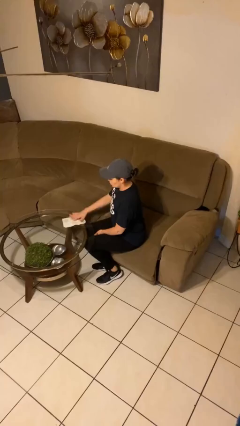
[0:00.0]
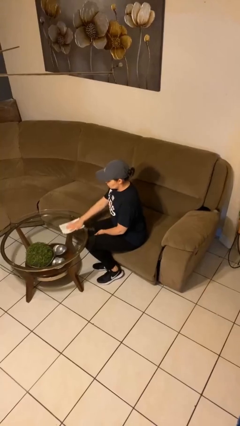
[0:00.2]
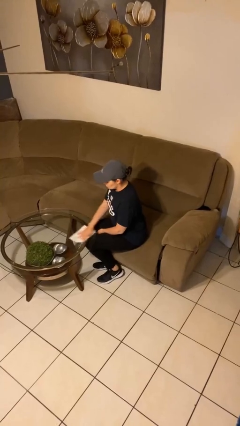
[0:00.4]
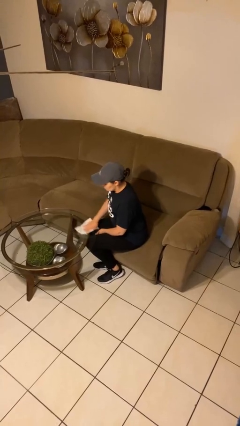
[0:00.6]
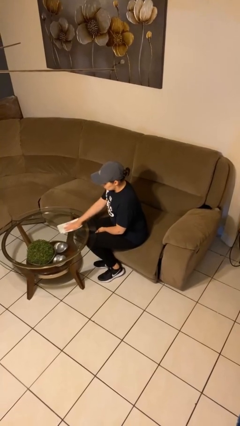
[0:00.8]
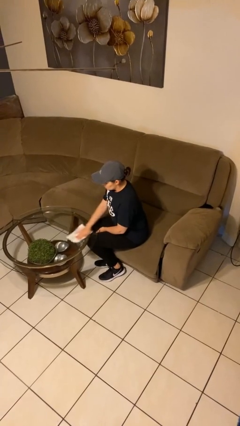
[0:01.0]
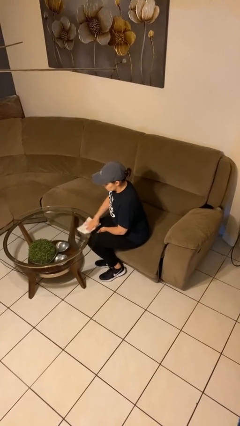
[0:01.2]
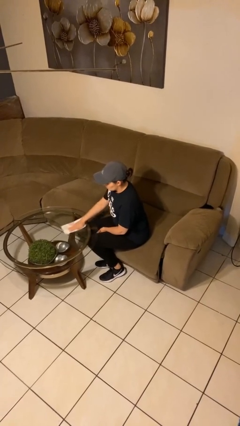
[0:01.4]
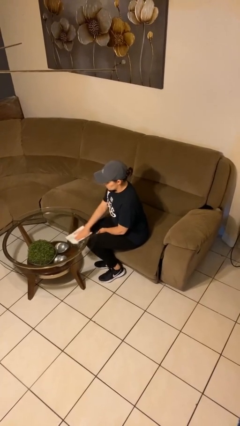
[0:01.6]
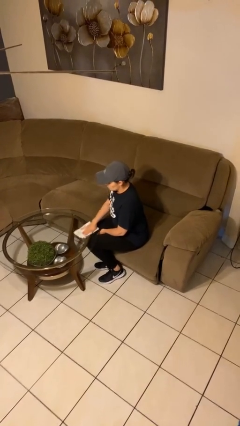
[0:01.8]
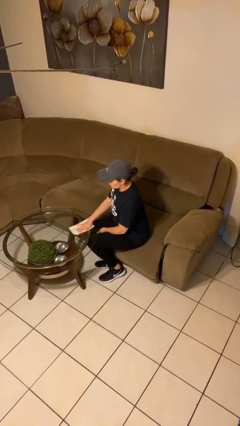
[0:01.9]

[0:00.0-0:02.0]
person cleans table with rag

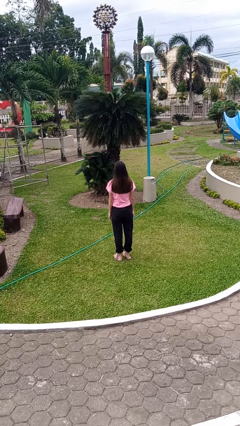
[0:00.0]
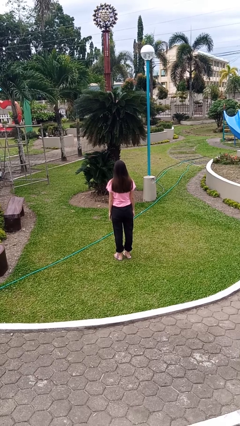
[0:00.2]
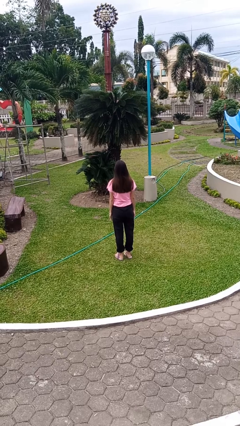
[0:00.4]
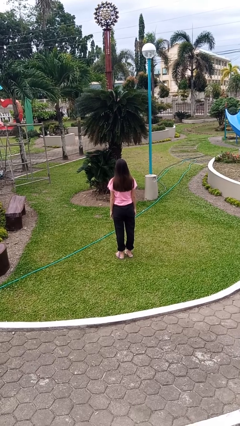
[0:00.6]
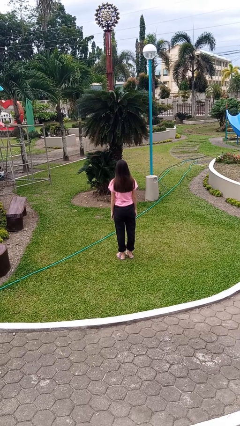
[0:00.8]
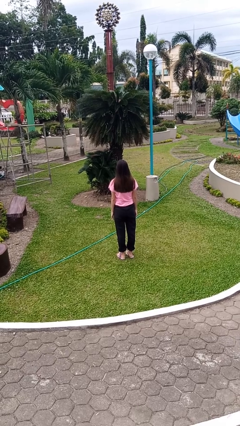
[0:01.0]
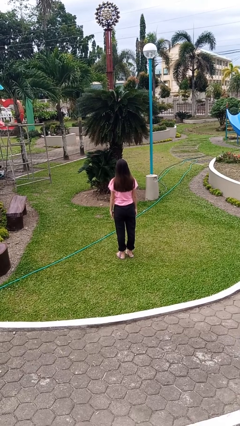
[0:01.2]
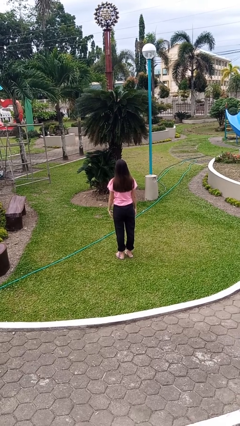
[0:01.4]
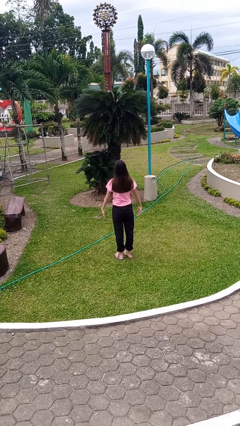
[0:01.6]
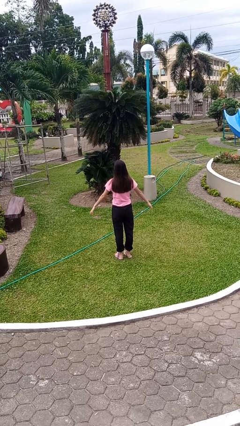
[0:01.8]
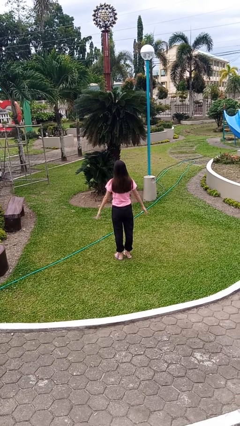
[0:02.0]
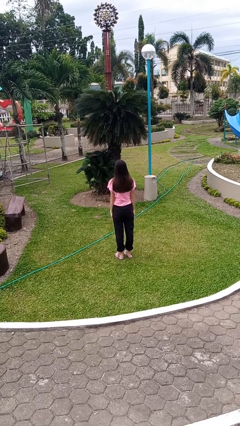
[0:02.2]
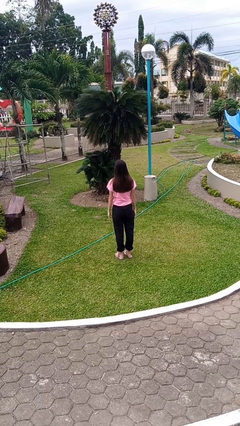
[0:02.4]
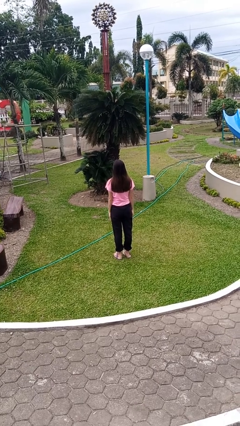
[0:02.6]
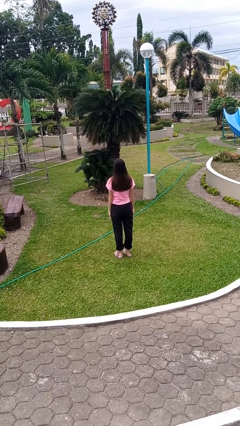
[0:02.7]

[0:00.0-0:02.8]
person slaps hands on thighs

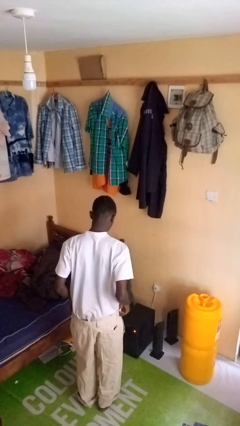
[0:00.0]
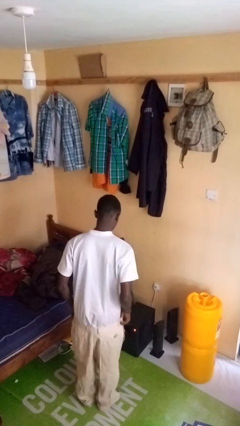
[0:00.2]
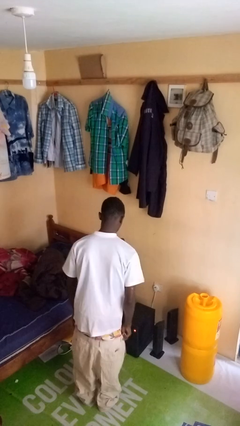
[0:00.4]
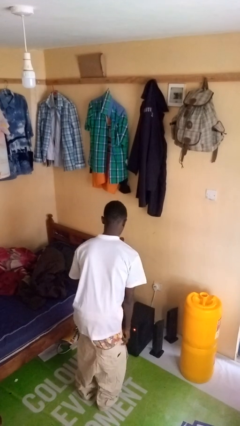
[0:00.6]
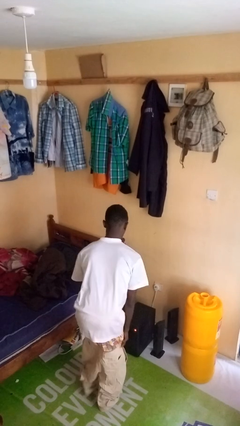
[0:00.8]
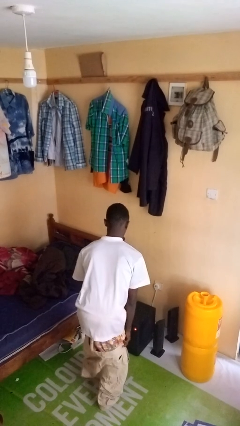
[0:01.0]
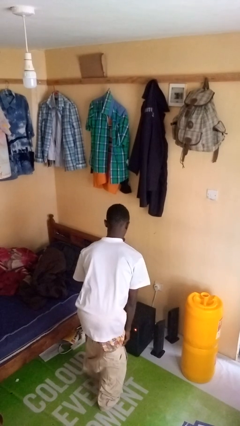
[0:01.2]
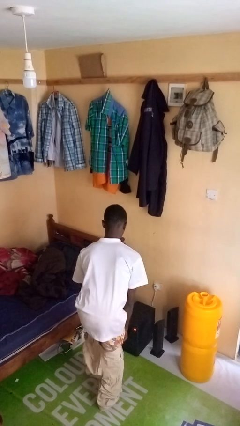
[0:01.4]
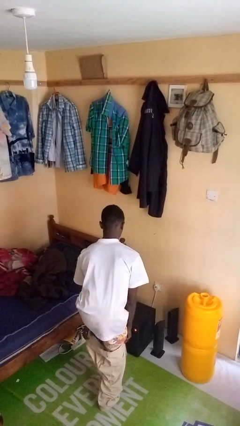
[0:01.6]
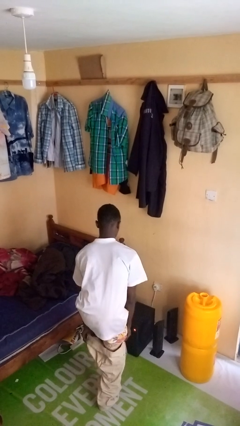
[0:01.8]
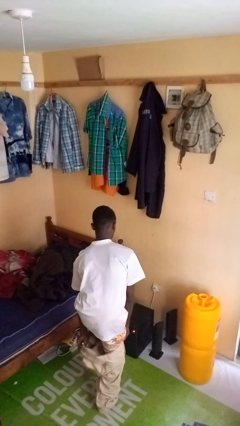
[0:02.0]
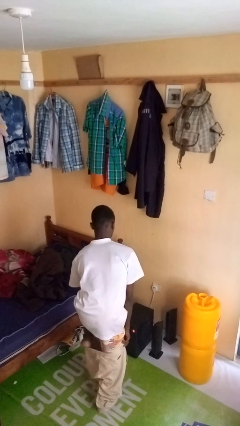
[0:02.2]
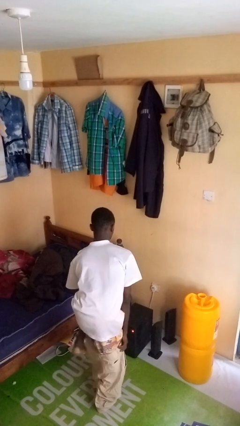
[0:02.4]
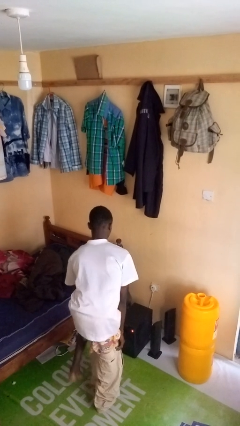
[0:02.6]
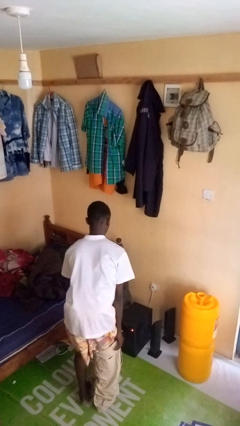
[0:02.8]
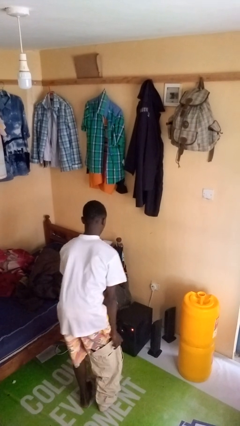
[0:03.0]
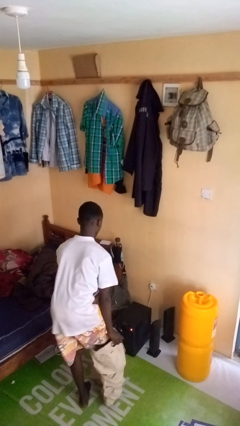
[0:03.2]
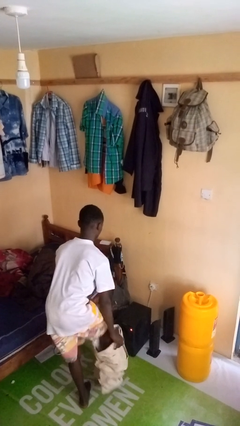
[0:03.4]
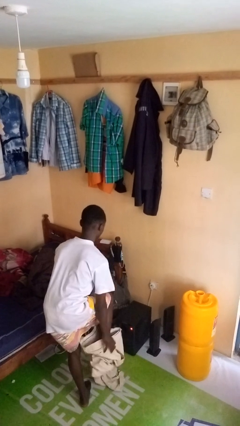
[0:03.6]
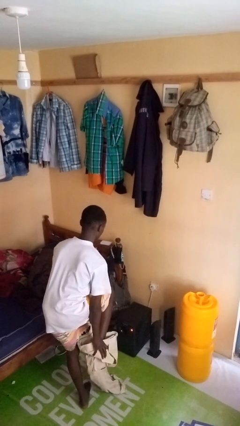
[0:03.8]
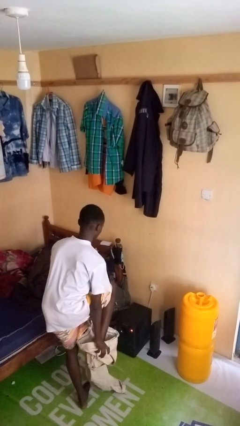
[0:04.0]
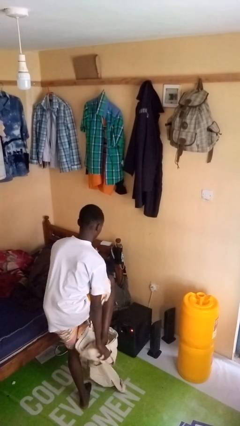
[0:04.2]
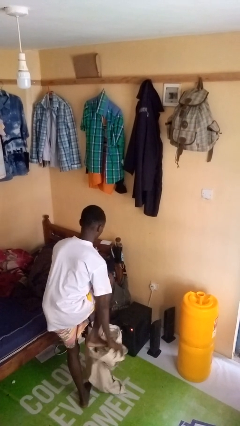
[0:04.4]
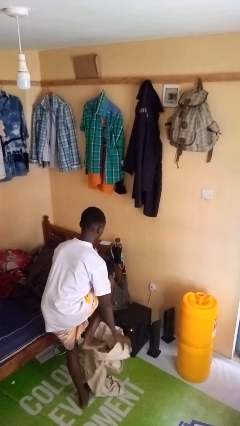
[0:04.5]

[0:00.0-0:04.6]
person takes off pants

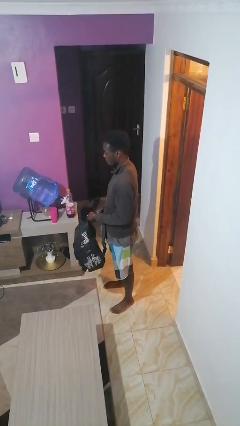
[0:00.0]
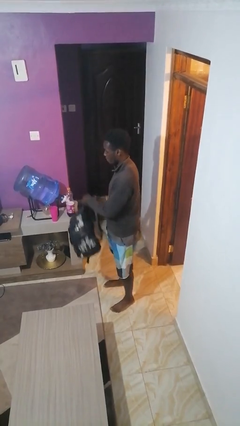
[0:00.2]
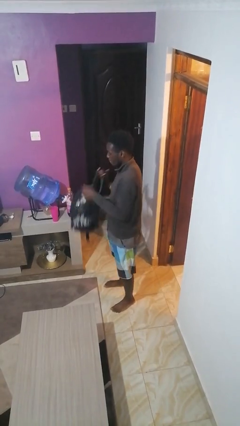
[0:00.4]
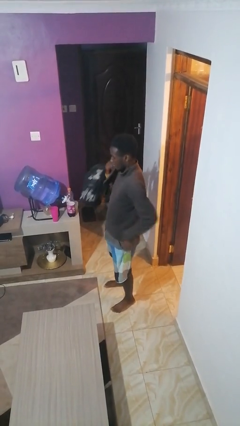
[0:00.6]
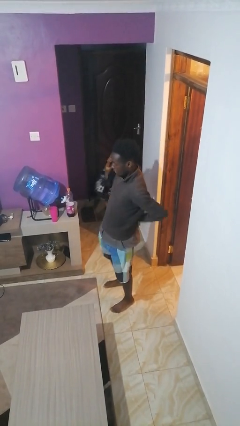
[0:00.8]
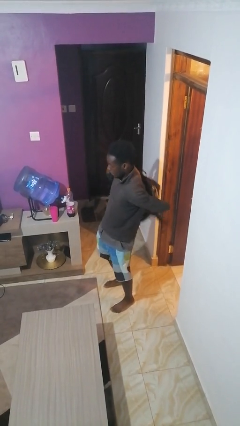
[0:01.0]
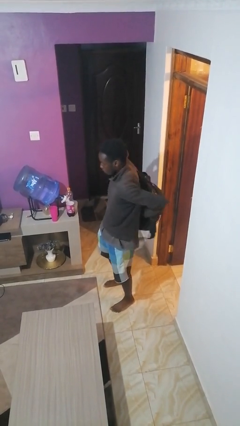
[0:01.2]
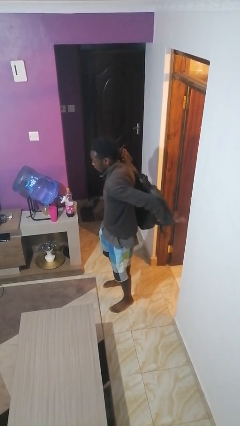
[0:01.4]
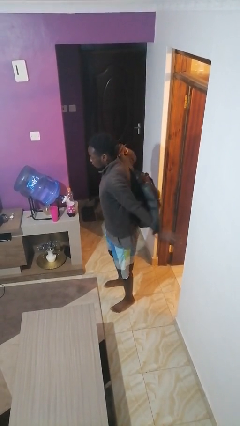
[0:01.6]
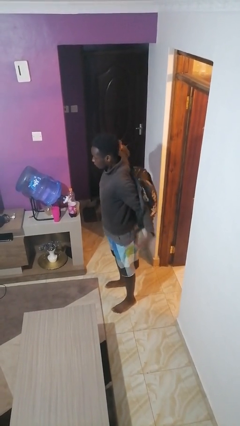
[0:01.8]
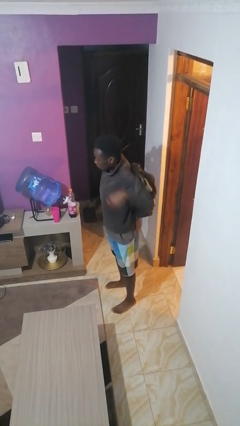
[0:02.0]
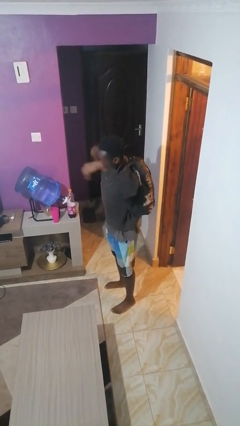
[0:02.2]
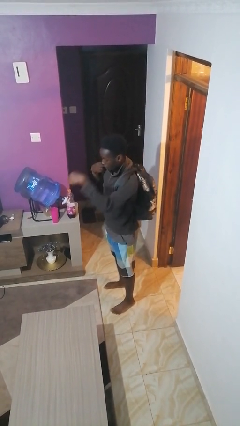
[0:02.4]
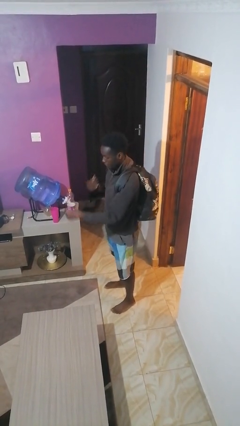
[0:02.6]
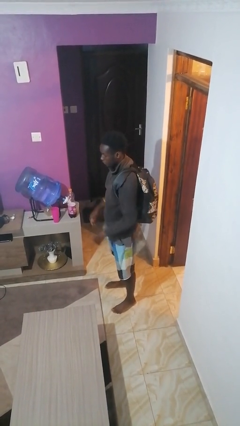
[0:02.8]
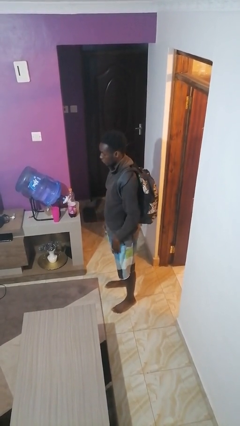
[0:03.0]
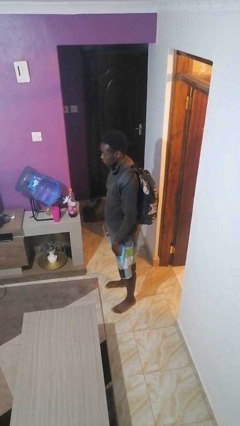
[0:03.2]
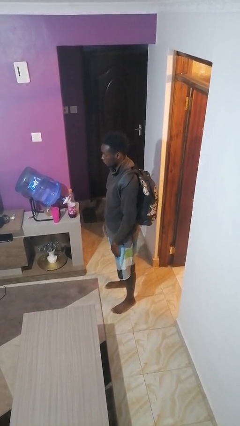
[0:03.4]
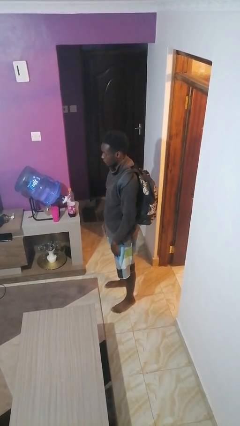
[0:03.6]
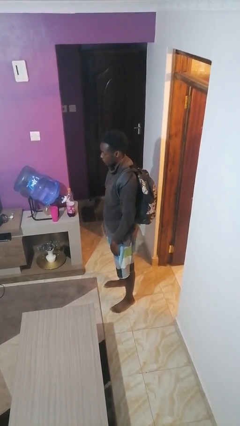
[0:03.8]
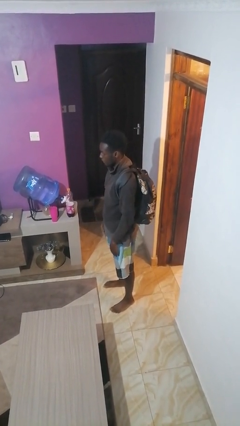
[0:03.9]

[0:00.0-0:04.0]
person puts on backpack

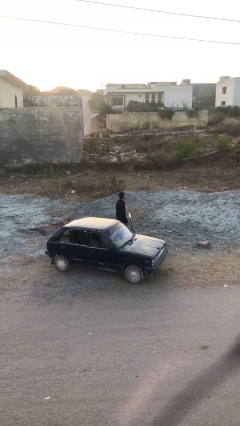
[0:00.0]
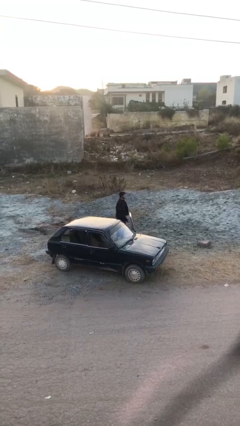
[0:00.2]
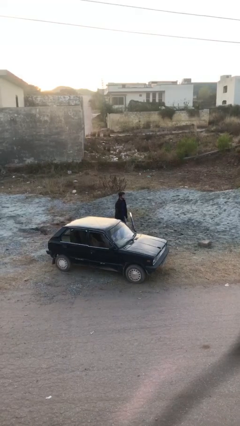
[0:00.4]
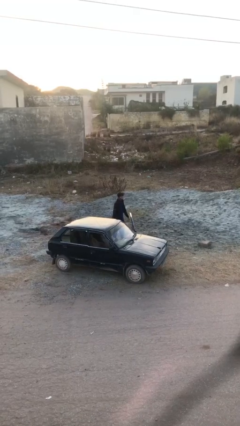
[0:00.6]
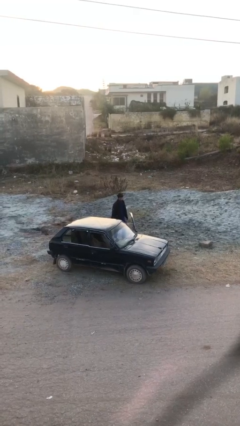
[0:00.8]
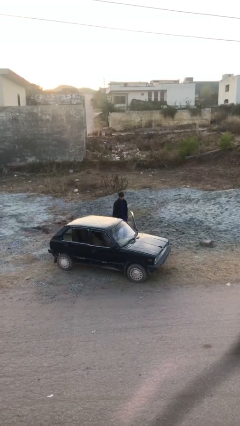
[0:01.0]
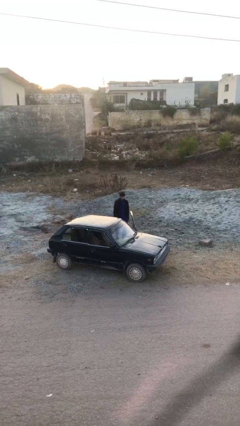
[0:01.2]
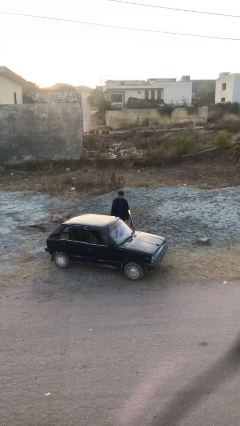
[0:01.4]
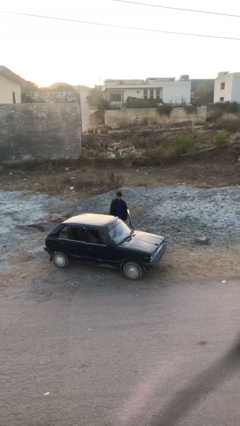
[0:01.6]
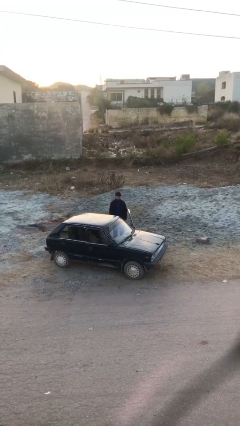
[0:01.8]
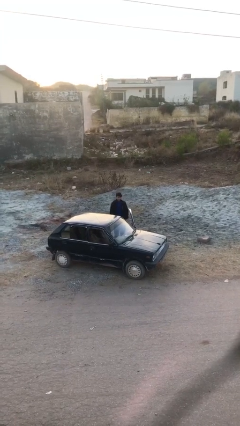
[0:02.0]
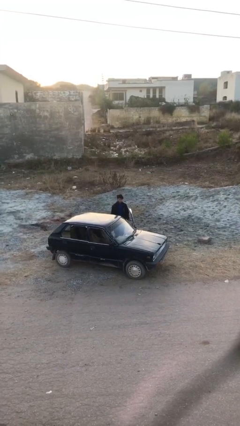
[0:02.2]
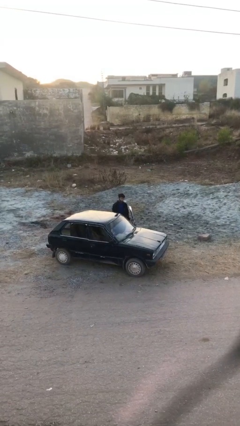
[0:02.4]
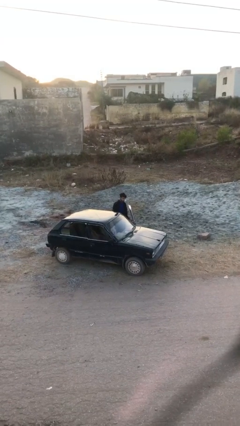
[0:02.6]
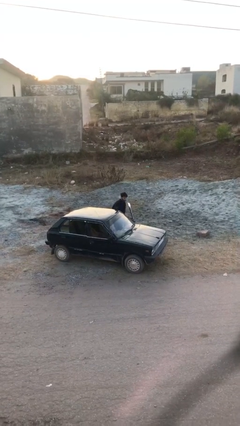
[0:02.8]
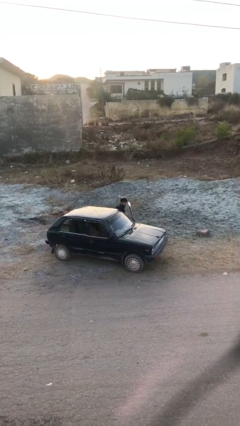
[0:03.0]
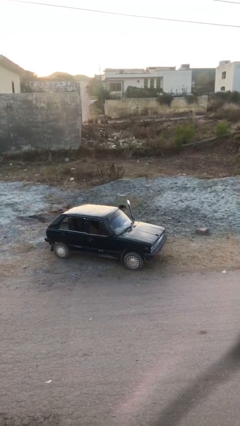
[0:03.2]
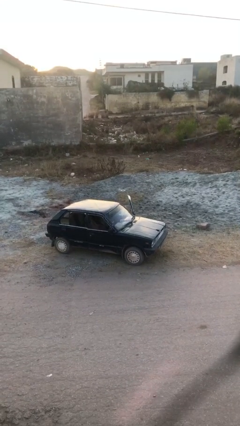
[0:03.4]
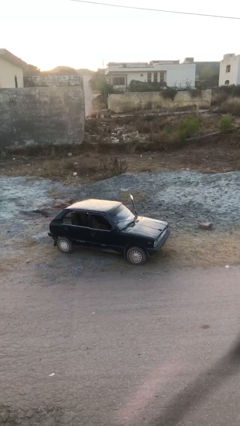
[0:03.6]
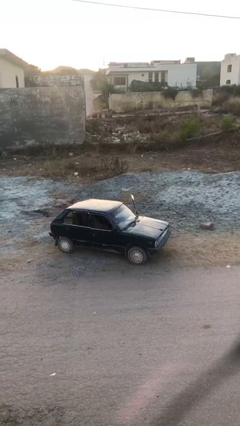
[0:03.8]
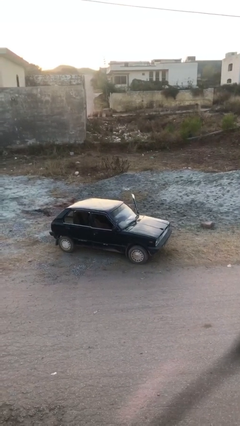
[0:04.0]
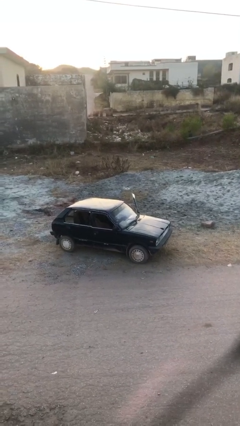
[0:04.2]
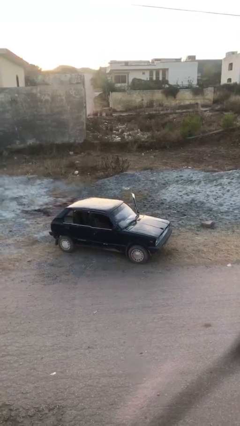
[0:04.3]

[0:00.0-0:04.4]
person enters car
